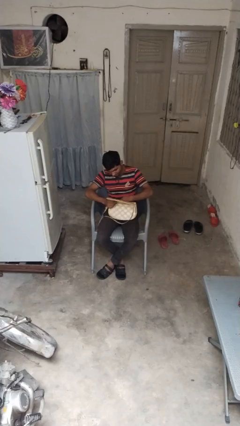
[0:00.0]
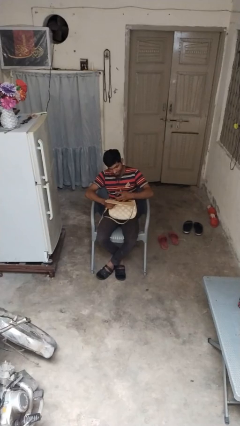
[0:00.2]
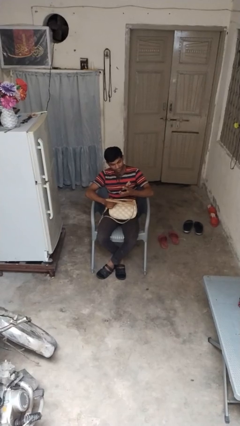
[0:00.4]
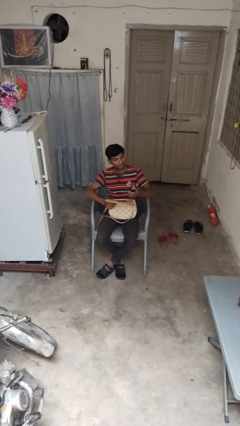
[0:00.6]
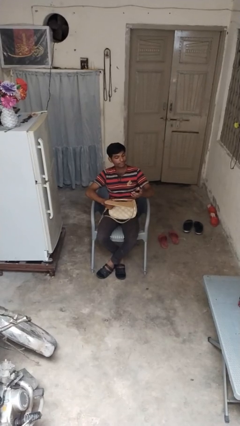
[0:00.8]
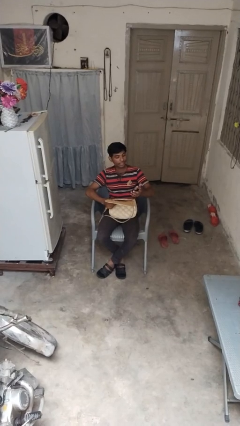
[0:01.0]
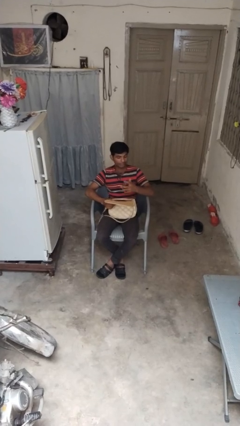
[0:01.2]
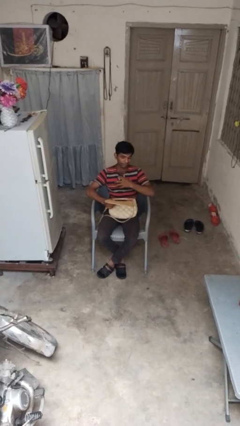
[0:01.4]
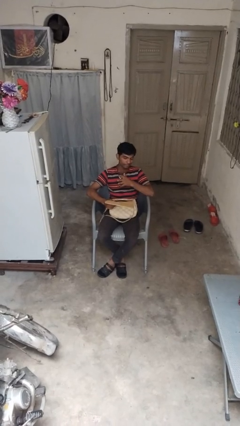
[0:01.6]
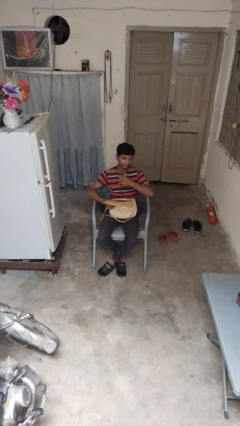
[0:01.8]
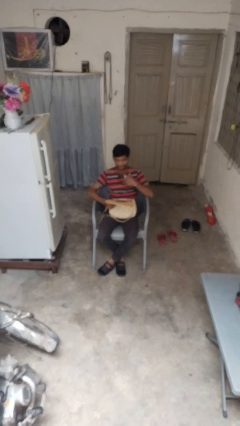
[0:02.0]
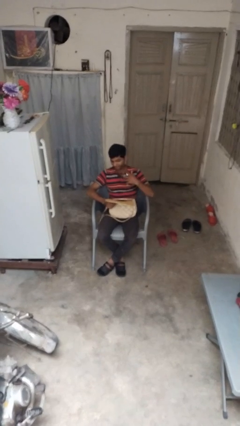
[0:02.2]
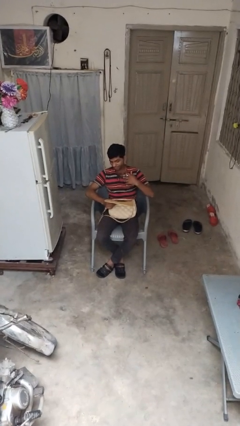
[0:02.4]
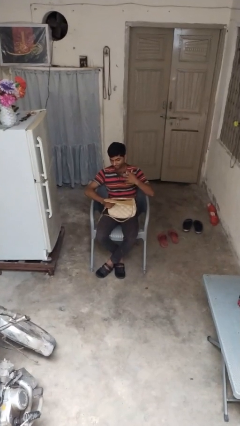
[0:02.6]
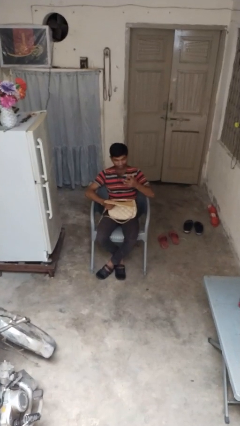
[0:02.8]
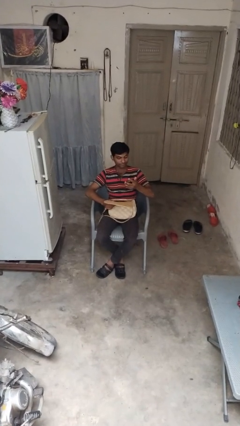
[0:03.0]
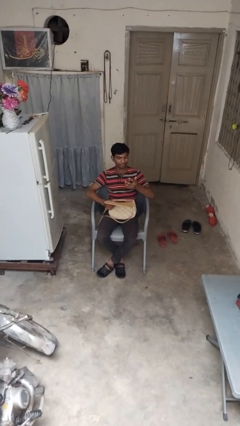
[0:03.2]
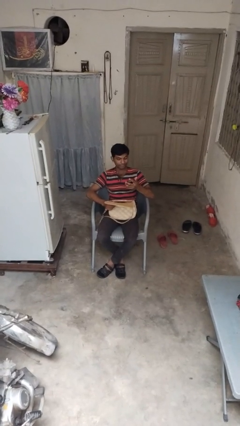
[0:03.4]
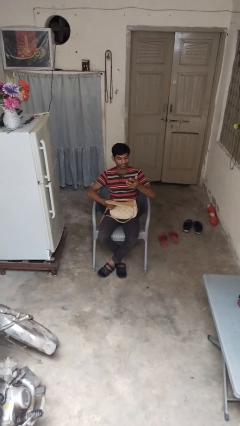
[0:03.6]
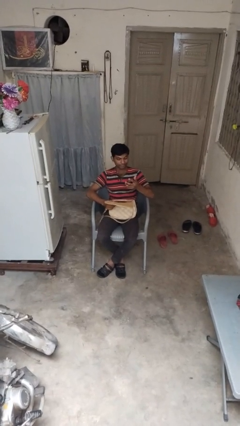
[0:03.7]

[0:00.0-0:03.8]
person takes object from purse

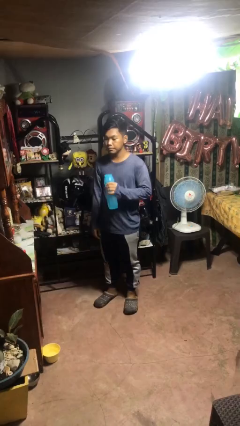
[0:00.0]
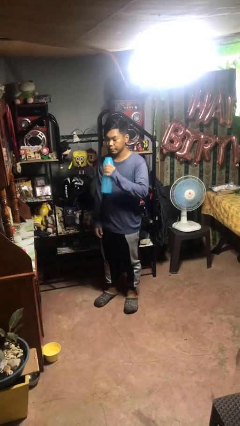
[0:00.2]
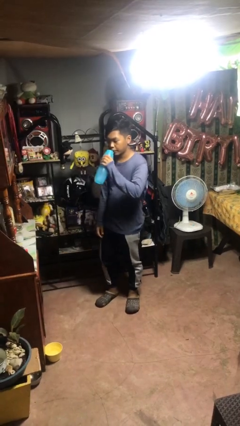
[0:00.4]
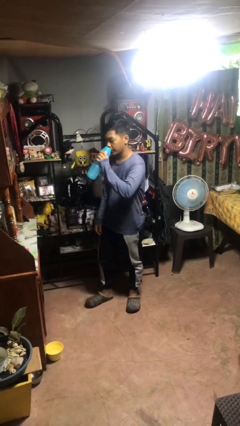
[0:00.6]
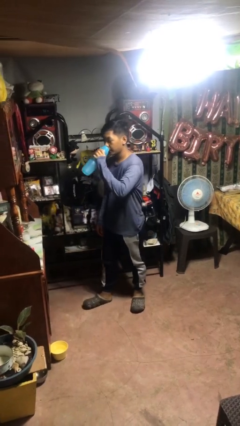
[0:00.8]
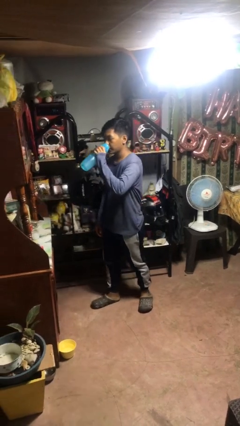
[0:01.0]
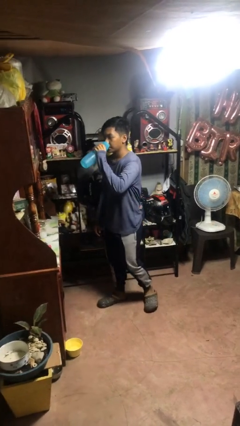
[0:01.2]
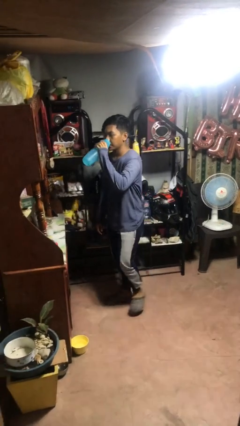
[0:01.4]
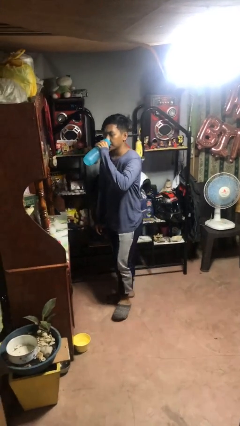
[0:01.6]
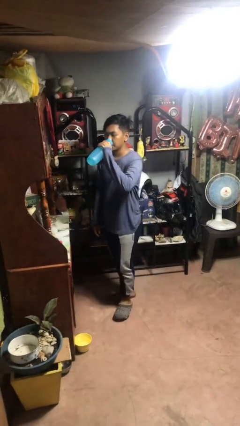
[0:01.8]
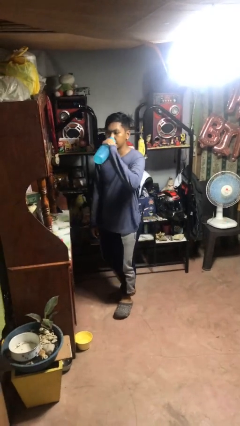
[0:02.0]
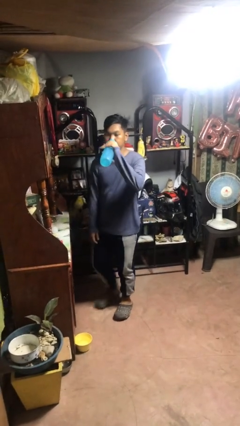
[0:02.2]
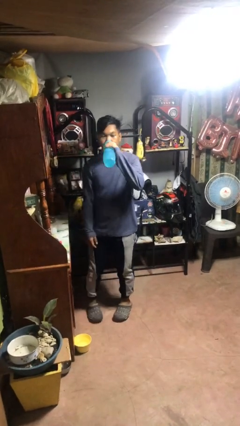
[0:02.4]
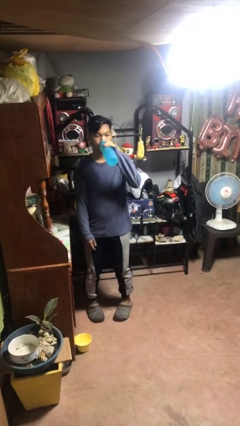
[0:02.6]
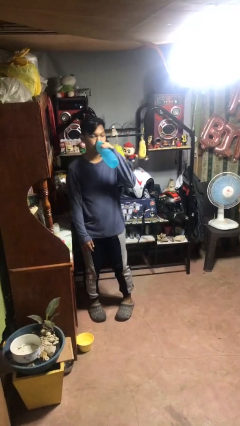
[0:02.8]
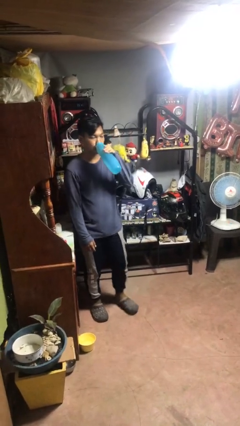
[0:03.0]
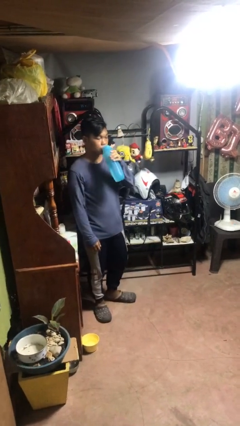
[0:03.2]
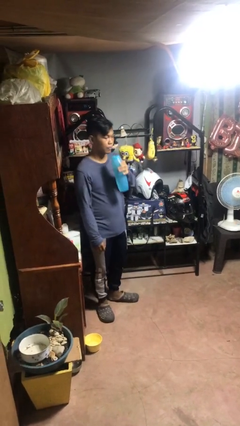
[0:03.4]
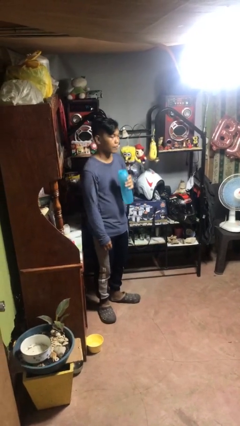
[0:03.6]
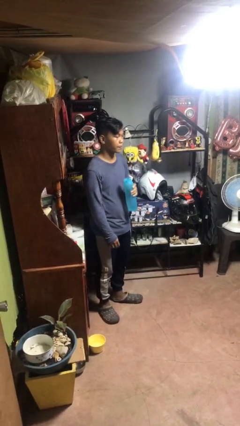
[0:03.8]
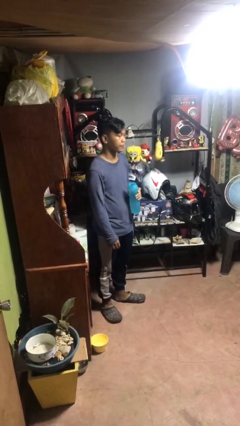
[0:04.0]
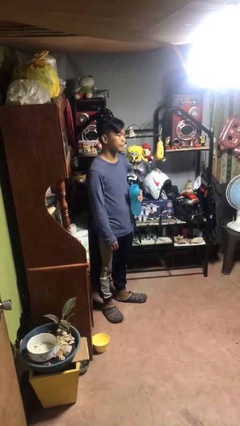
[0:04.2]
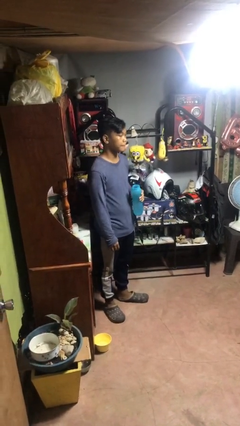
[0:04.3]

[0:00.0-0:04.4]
person drinks from bottle

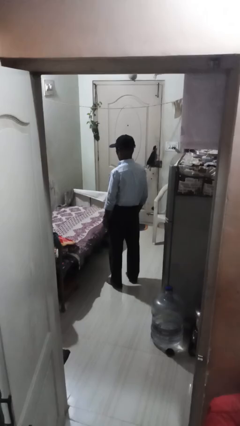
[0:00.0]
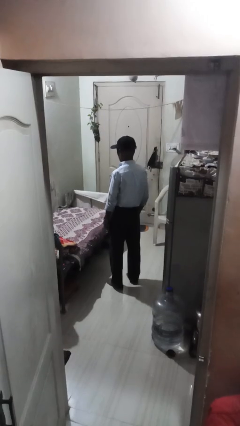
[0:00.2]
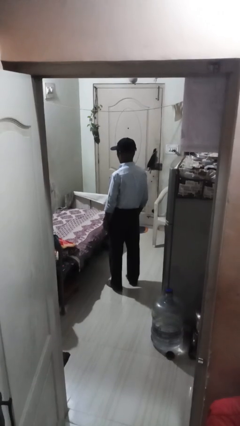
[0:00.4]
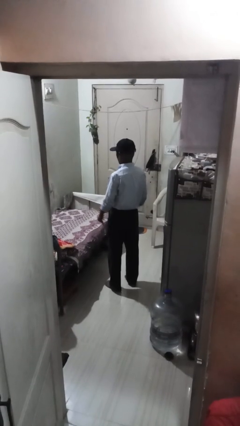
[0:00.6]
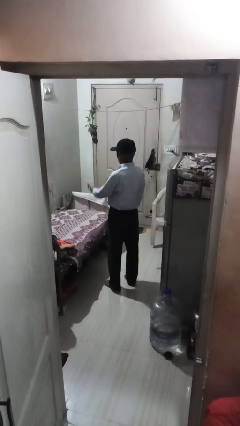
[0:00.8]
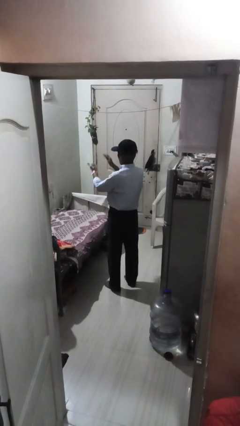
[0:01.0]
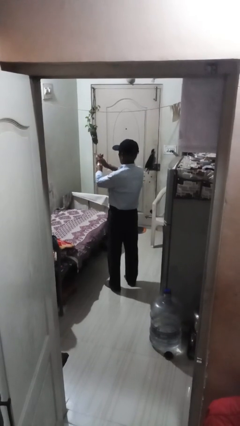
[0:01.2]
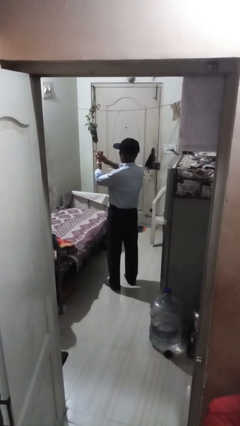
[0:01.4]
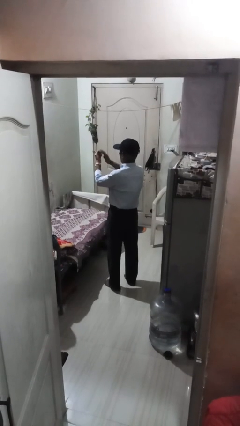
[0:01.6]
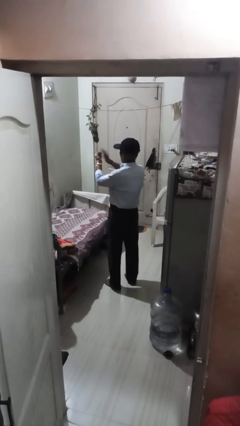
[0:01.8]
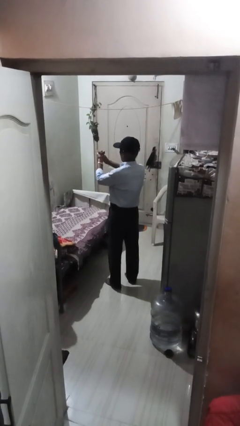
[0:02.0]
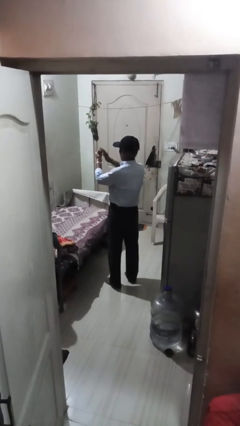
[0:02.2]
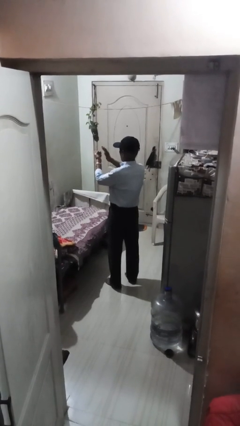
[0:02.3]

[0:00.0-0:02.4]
person claps hands

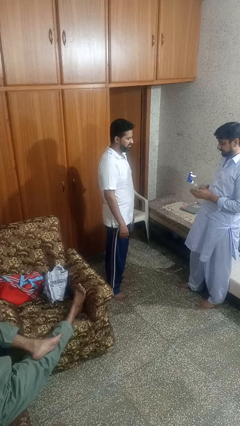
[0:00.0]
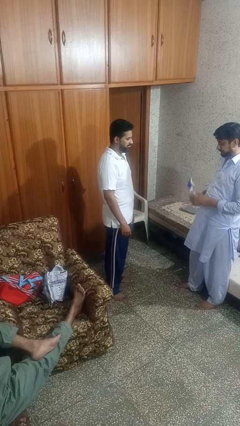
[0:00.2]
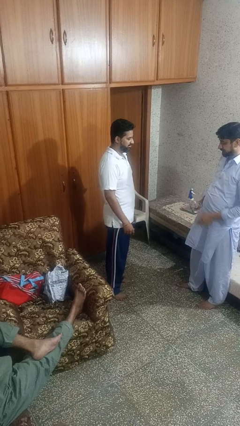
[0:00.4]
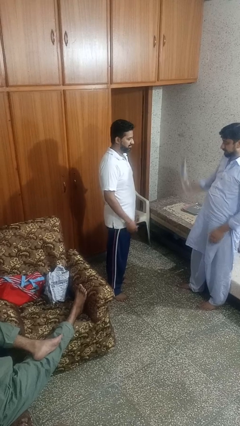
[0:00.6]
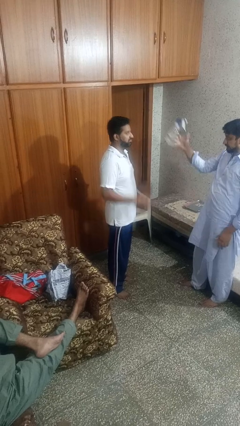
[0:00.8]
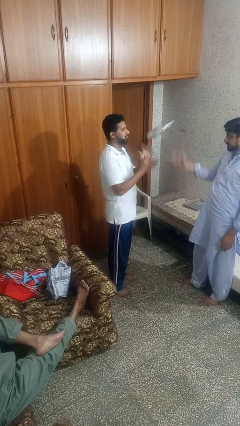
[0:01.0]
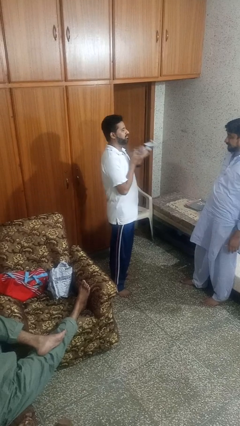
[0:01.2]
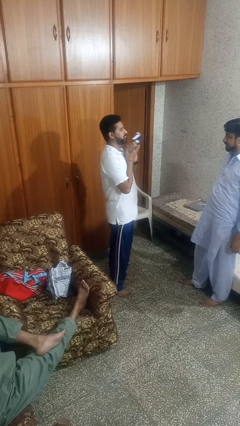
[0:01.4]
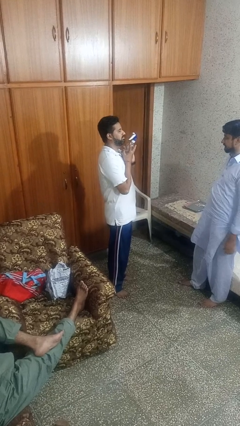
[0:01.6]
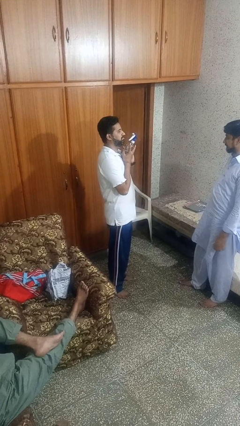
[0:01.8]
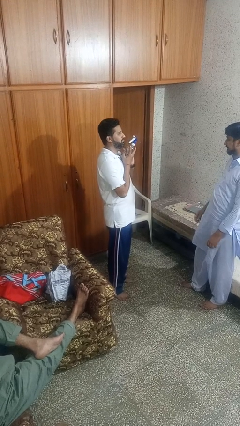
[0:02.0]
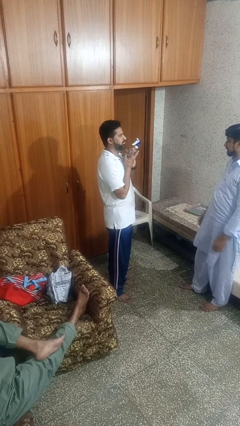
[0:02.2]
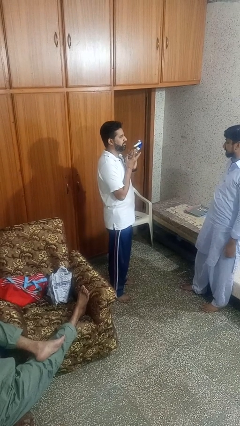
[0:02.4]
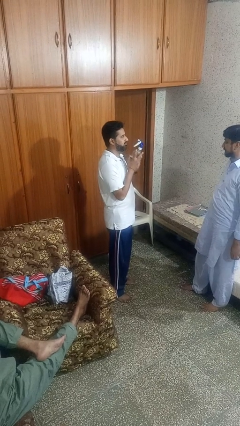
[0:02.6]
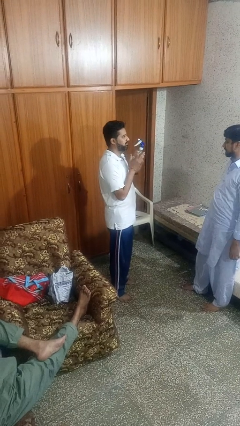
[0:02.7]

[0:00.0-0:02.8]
person catches object from person

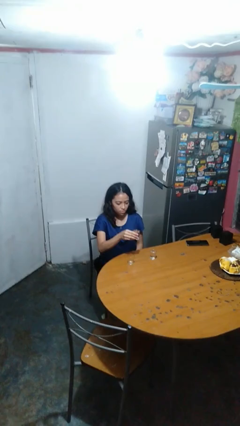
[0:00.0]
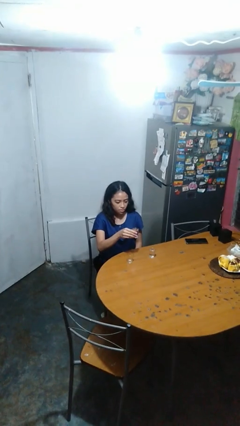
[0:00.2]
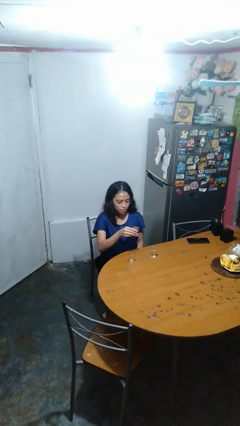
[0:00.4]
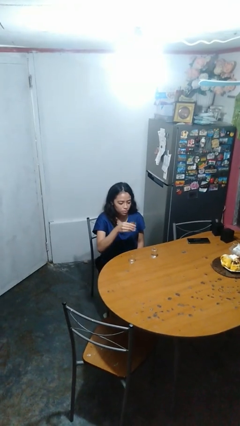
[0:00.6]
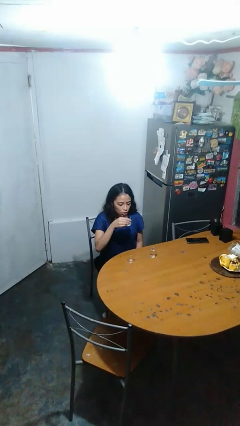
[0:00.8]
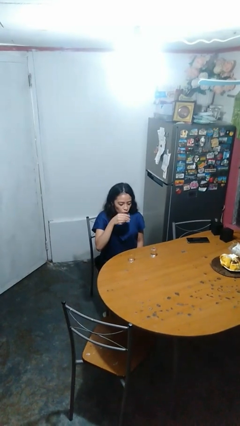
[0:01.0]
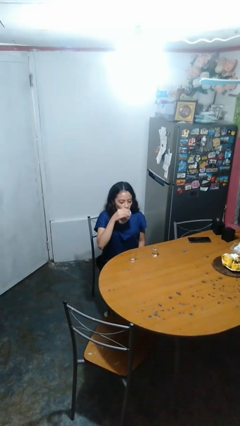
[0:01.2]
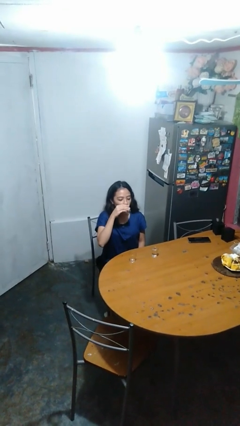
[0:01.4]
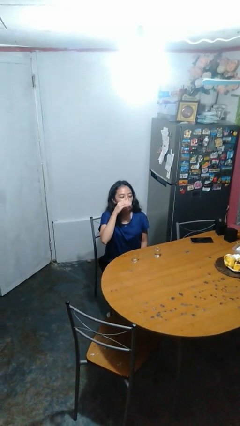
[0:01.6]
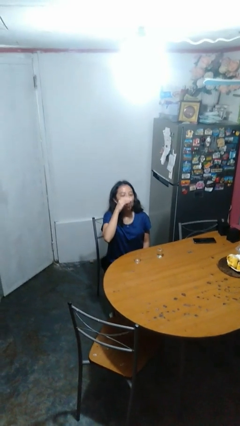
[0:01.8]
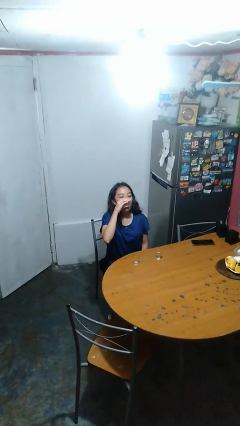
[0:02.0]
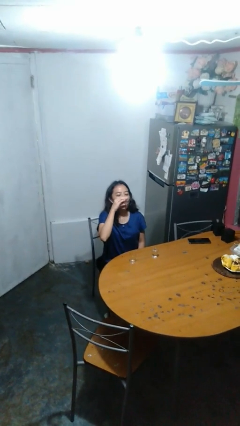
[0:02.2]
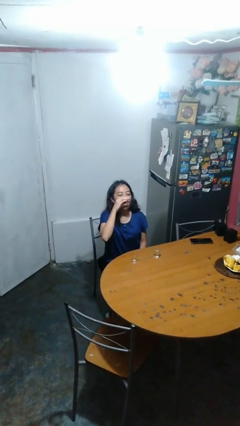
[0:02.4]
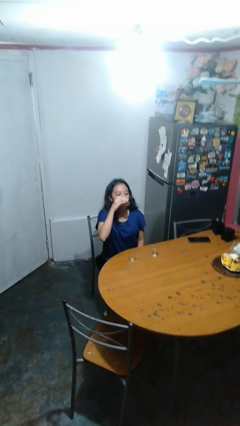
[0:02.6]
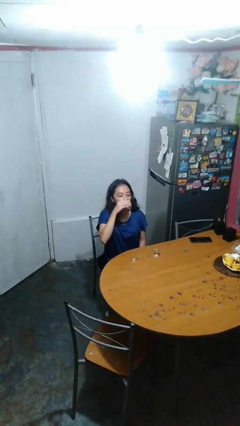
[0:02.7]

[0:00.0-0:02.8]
person drinks from shotglass

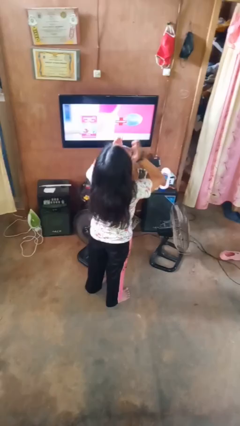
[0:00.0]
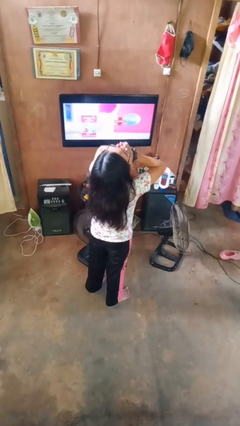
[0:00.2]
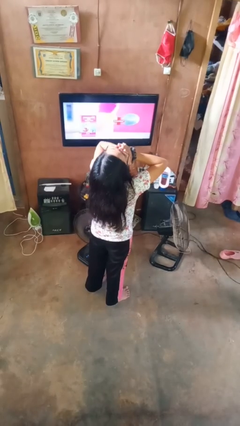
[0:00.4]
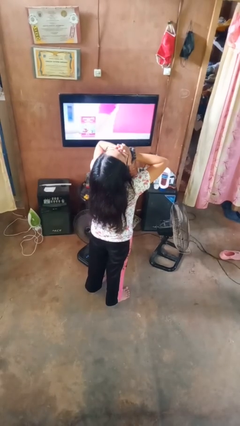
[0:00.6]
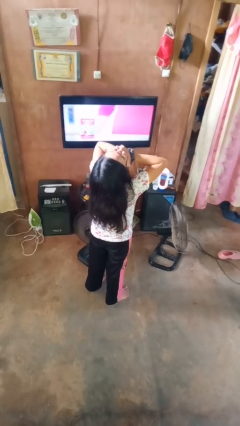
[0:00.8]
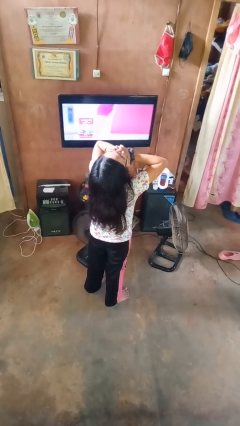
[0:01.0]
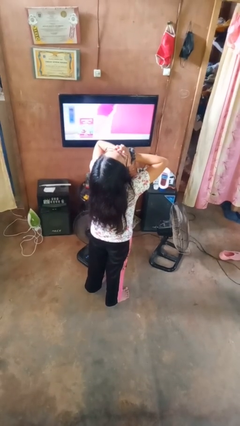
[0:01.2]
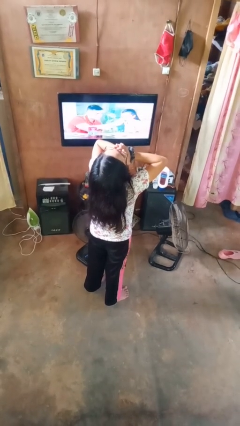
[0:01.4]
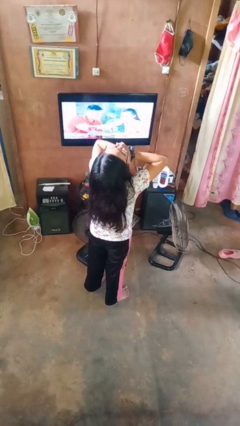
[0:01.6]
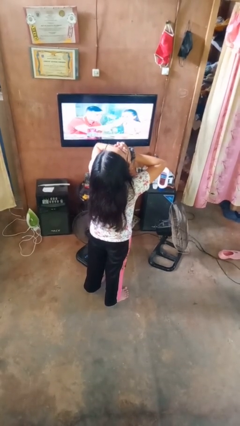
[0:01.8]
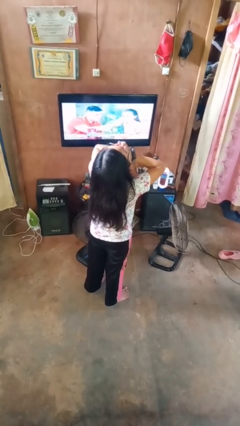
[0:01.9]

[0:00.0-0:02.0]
person yawns
